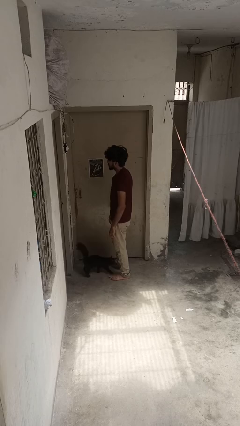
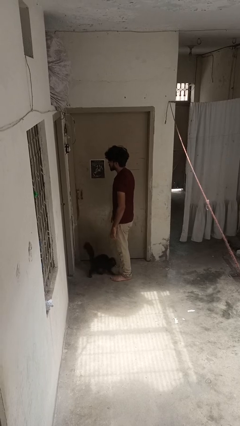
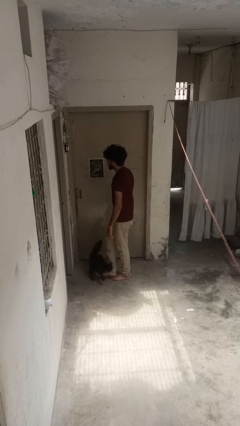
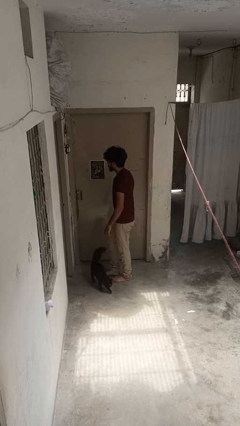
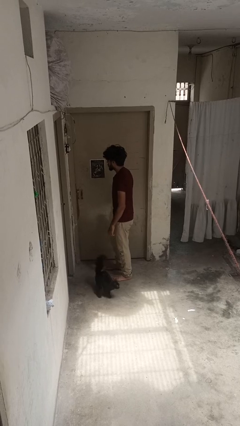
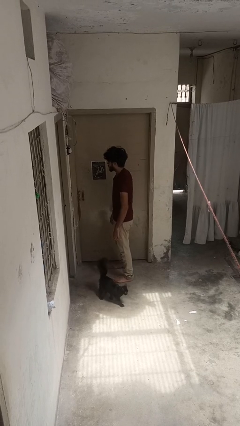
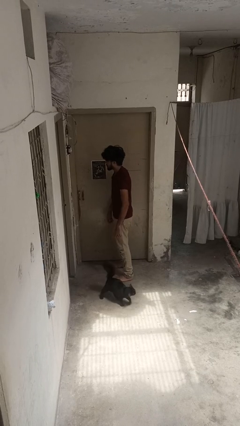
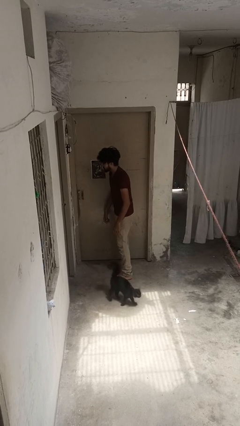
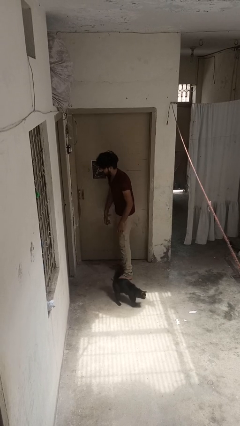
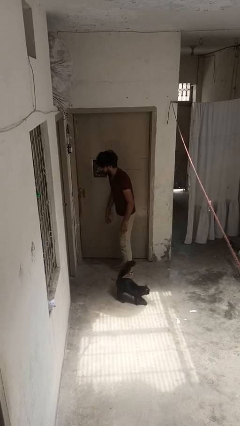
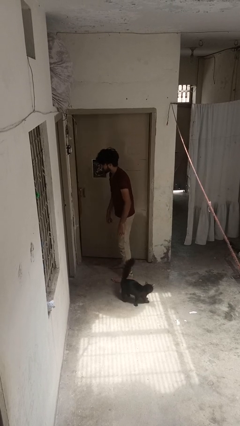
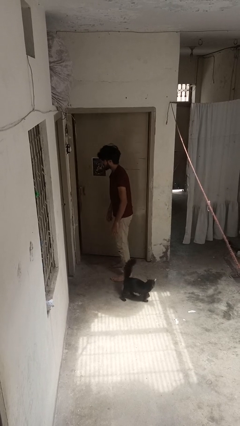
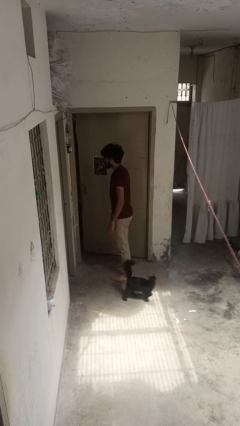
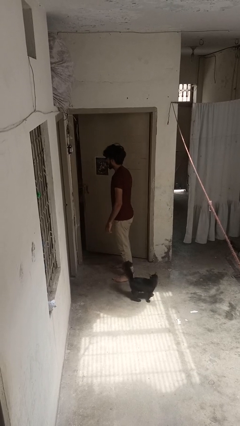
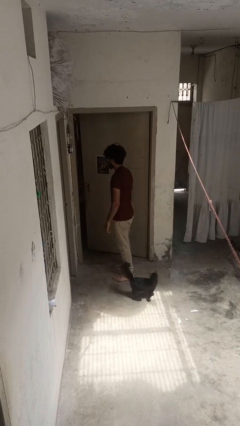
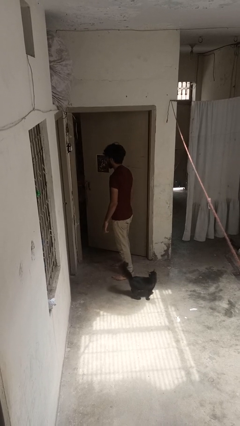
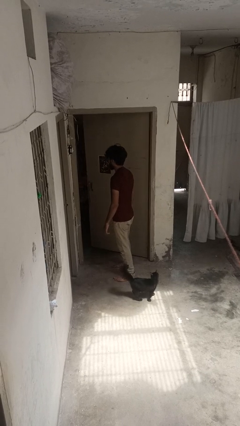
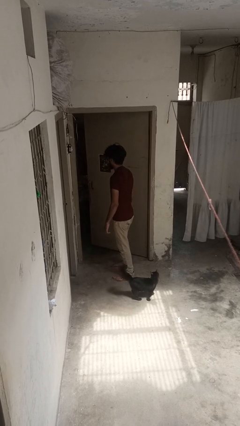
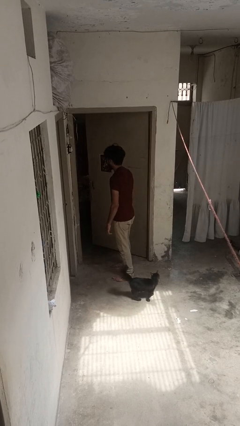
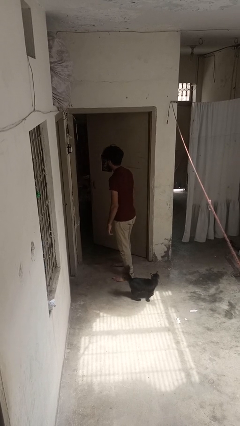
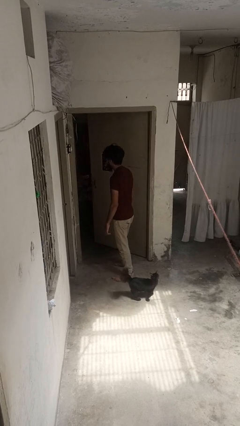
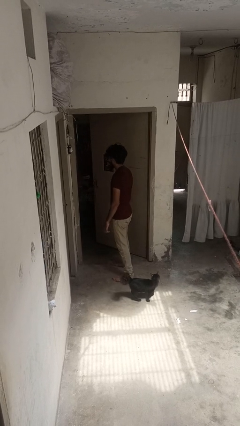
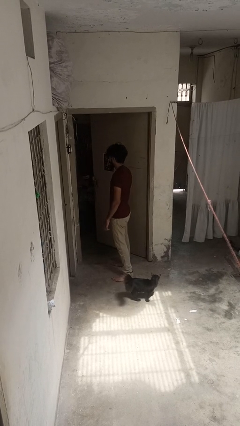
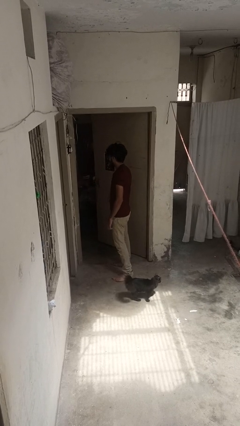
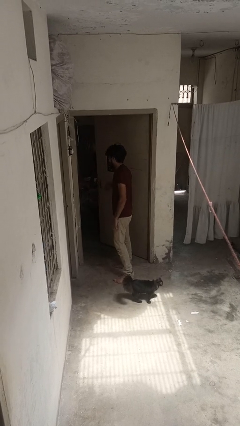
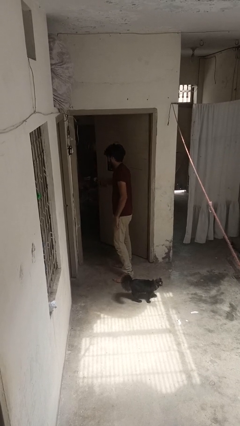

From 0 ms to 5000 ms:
person opens facility door

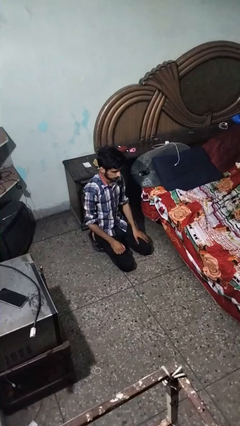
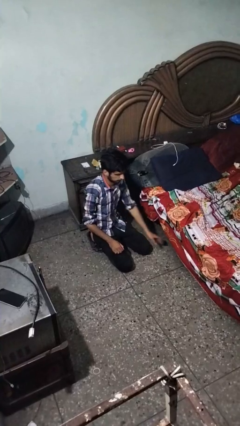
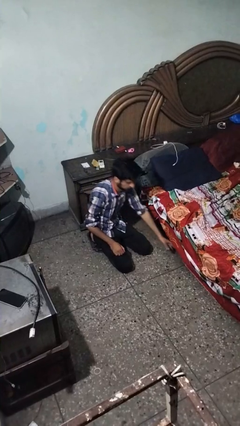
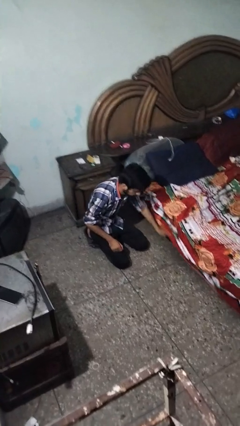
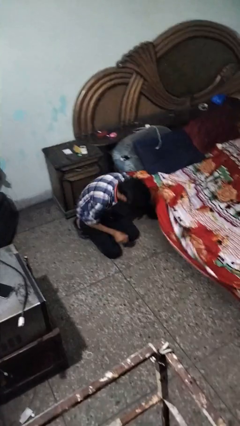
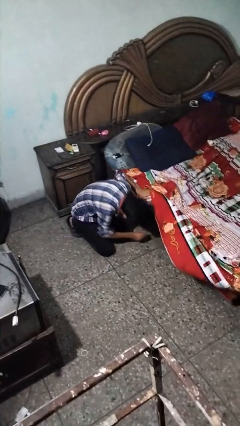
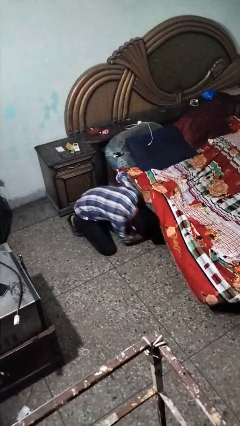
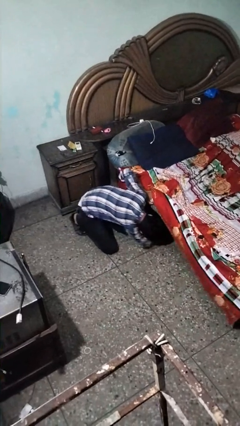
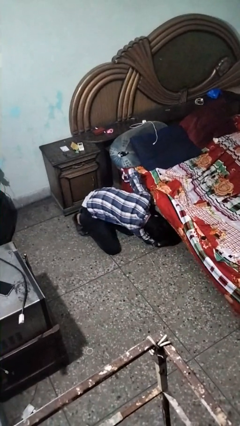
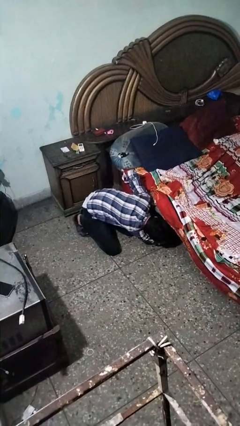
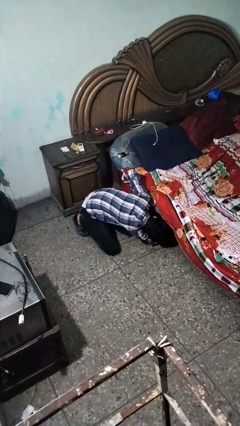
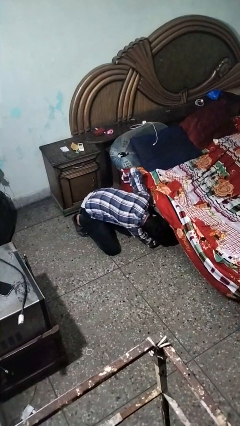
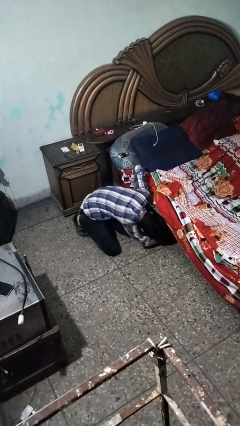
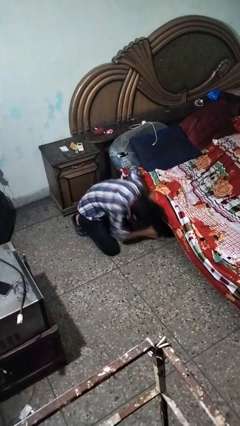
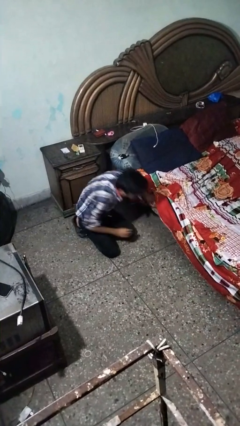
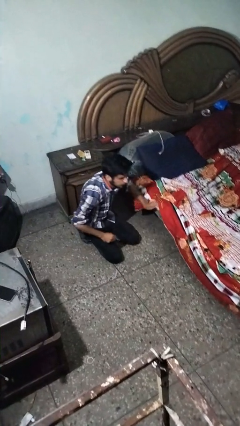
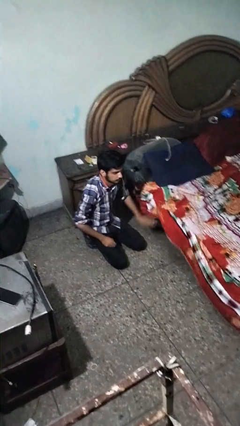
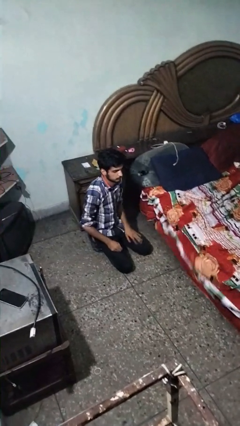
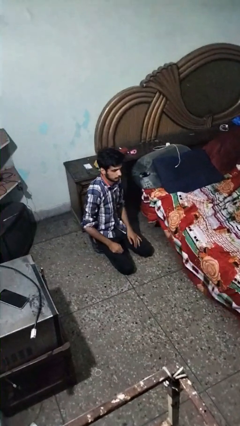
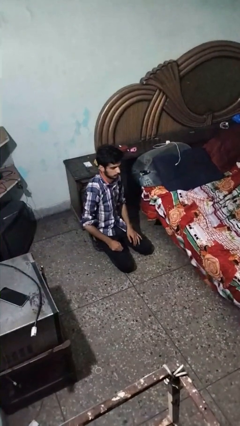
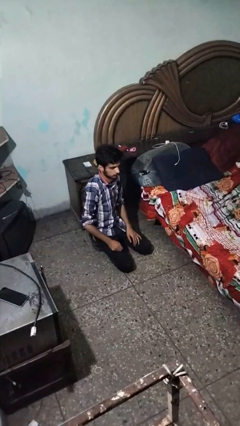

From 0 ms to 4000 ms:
person searches under bed

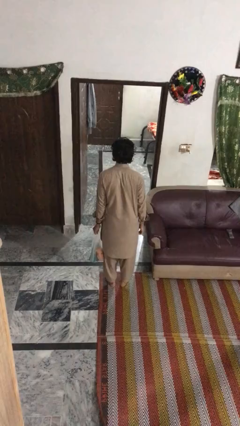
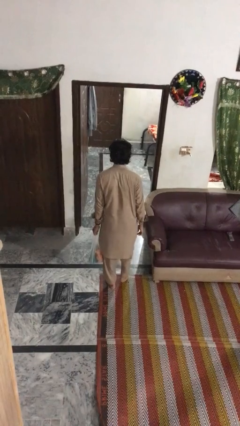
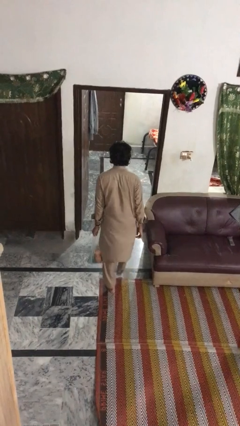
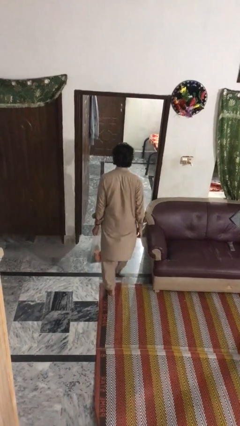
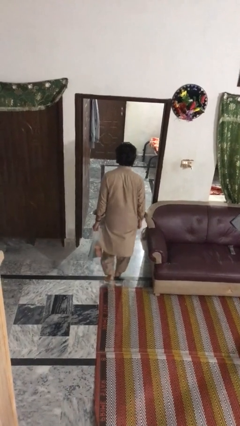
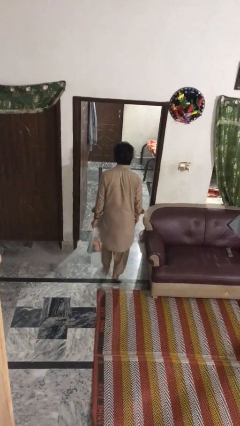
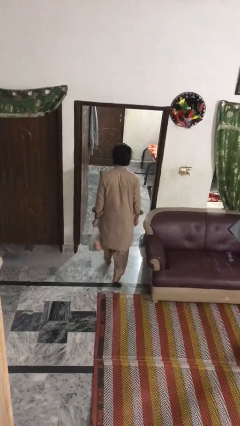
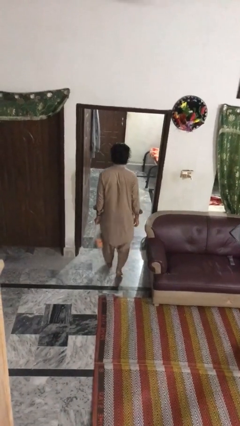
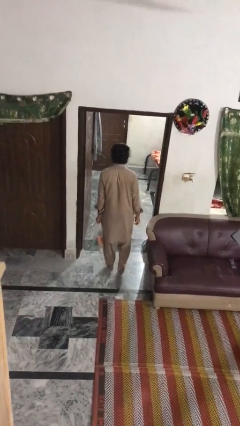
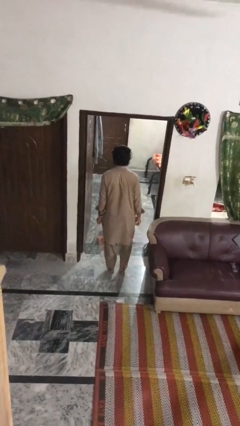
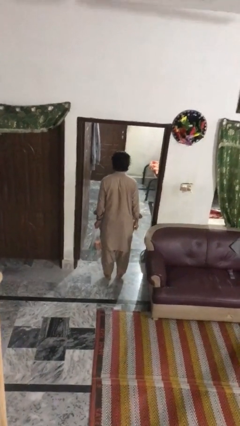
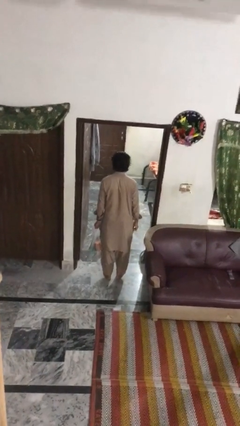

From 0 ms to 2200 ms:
person carries groceries

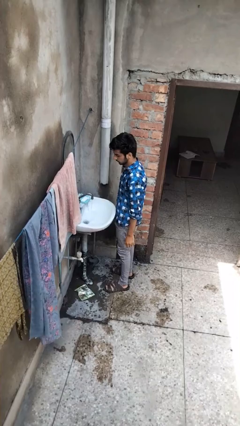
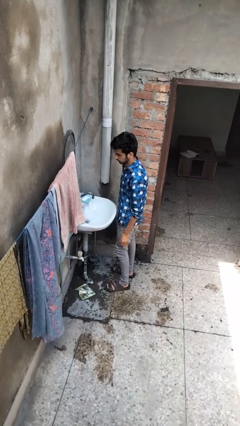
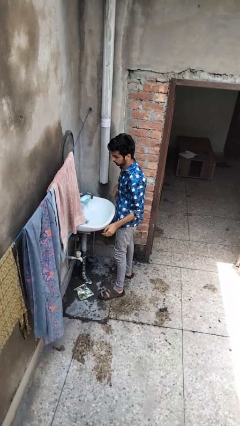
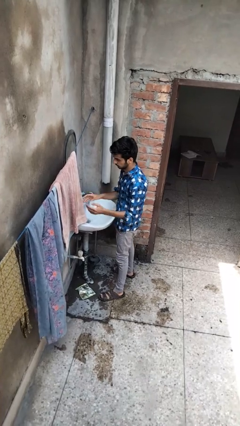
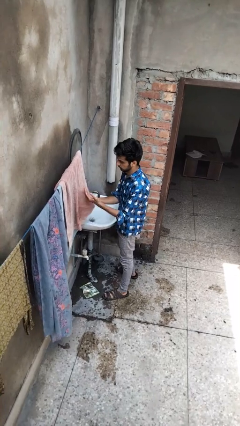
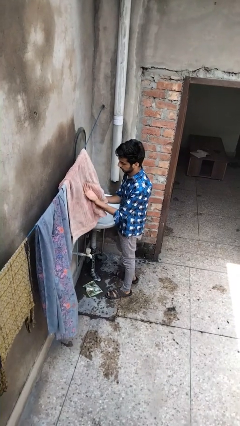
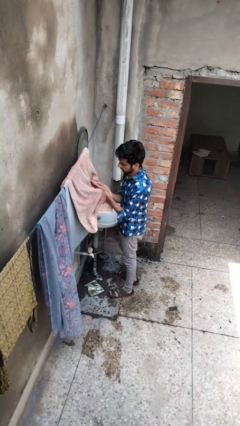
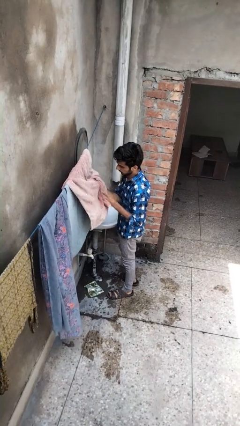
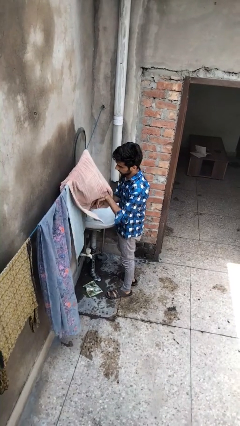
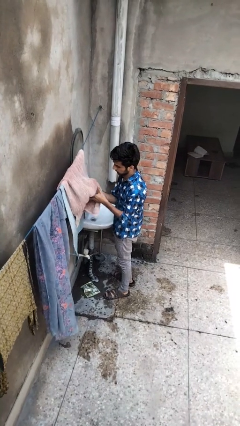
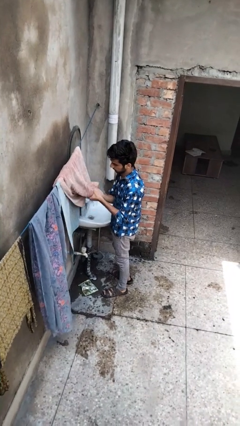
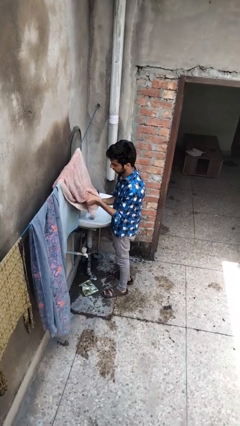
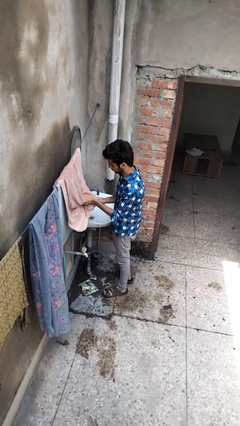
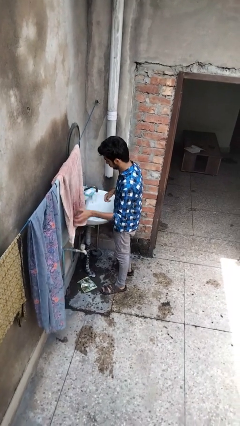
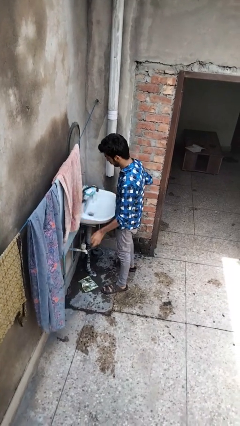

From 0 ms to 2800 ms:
person dries hands with towel

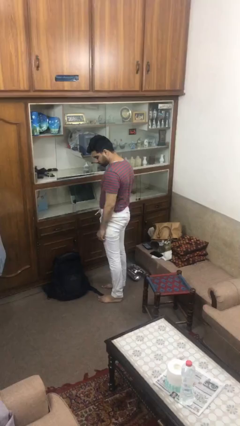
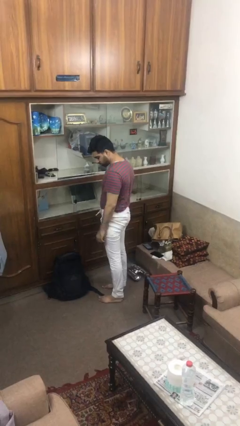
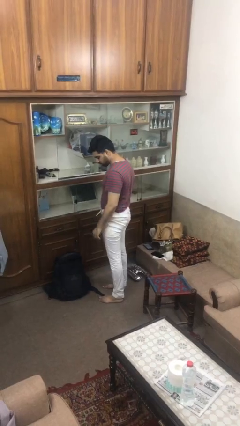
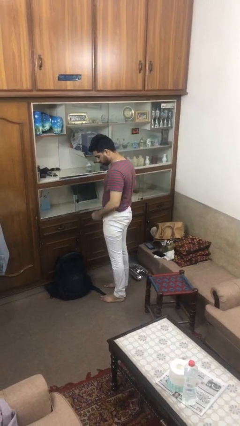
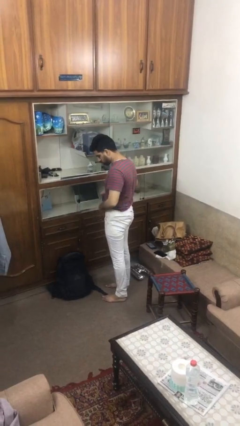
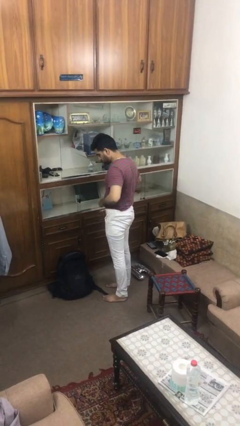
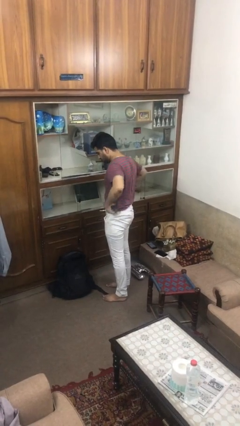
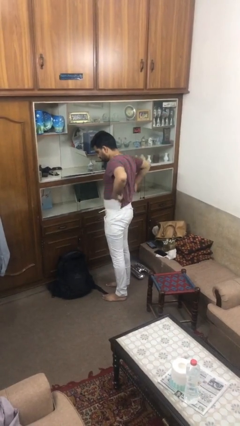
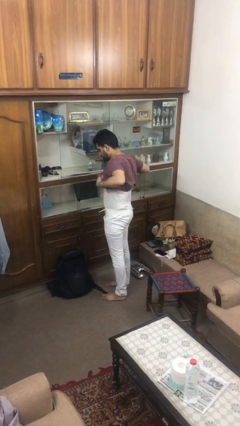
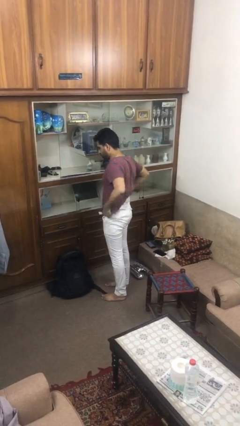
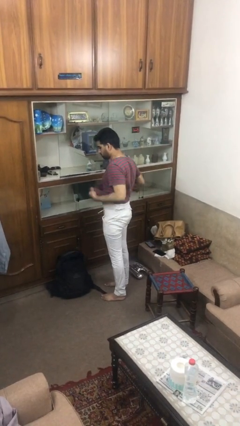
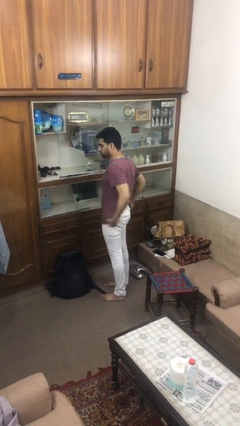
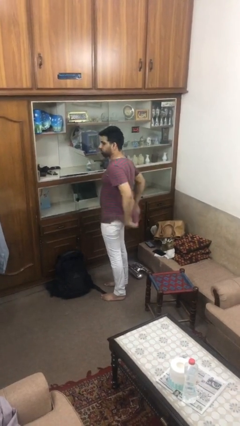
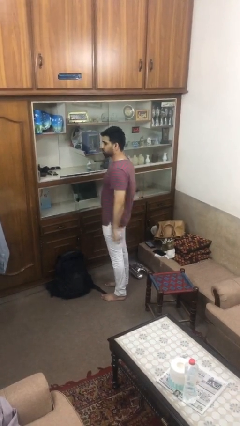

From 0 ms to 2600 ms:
person untucks shirt

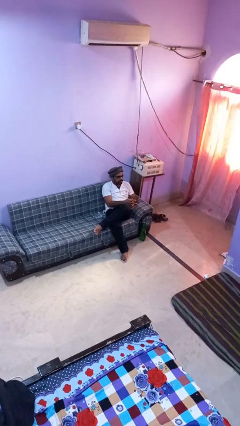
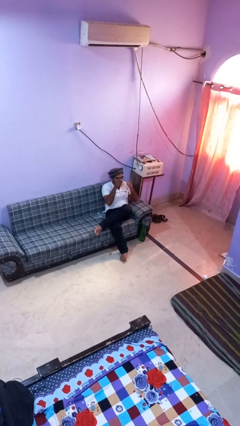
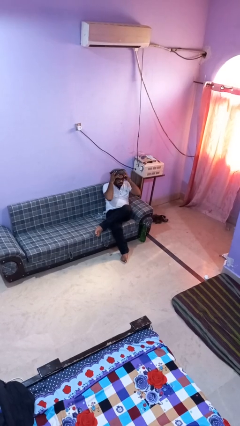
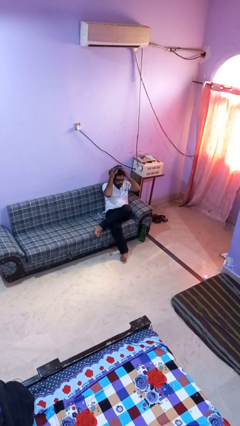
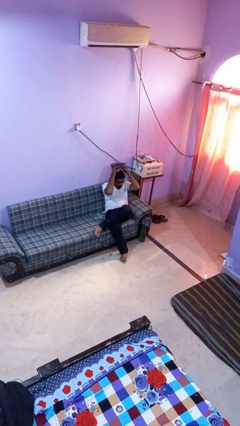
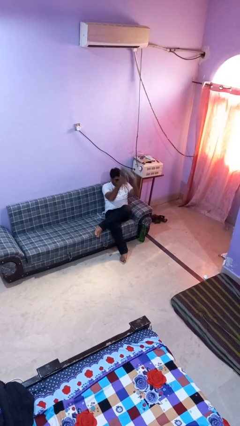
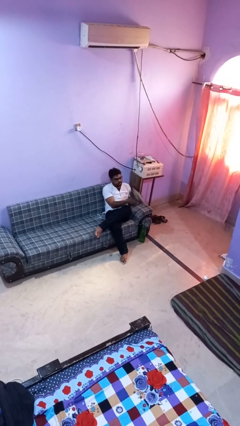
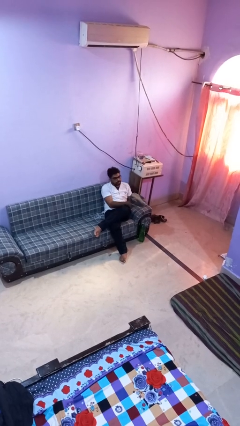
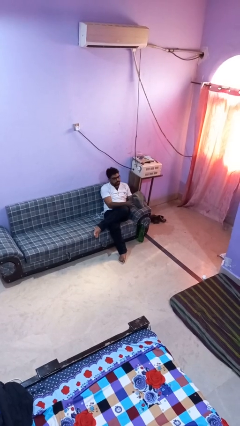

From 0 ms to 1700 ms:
person takes off hat
